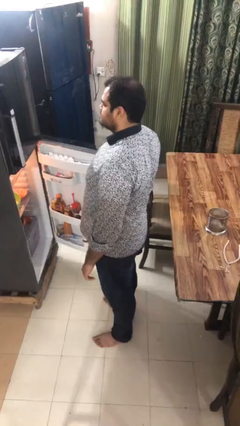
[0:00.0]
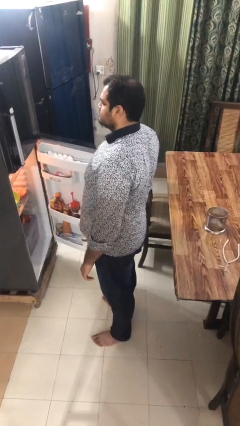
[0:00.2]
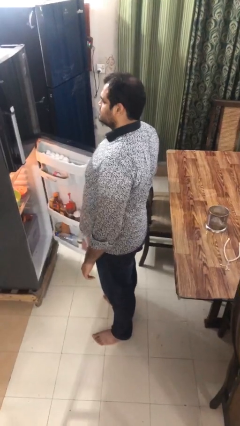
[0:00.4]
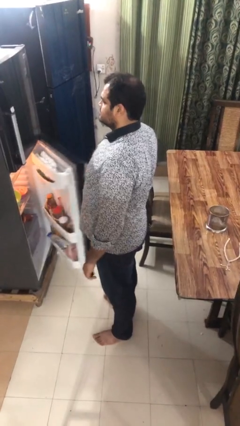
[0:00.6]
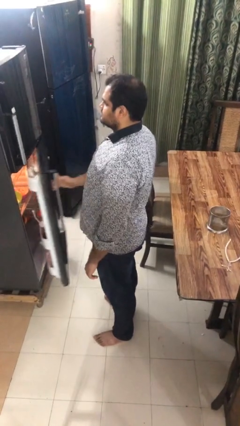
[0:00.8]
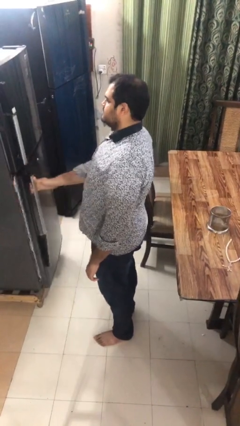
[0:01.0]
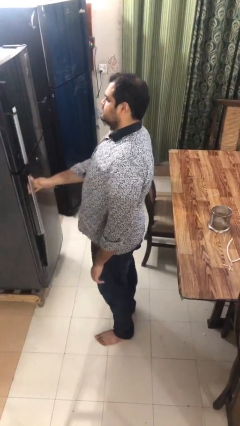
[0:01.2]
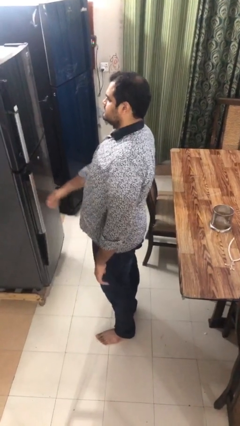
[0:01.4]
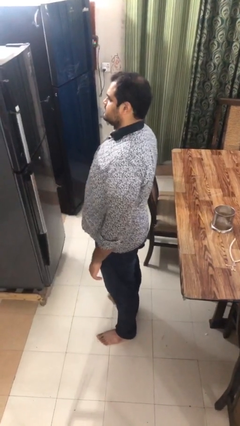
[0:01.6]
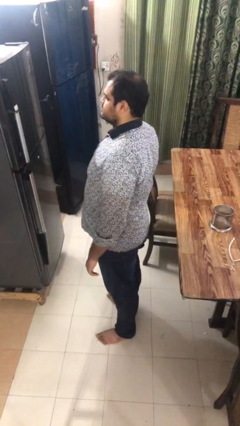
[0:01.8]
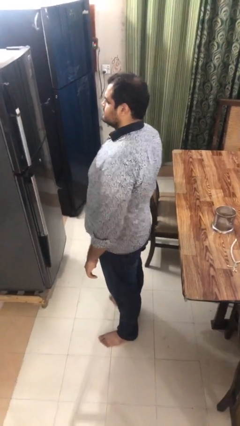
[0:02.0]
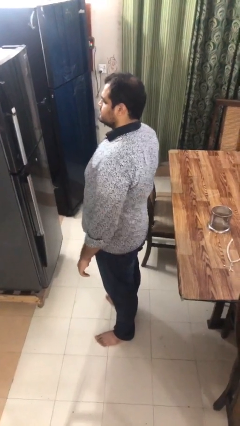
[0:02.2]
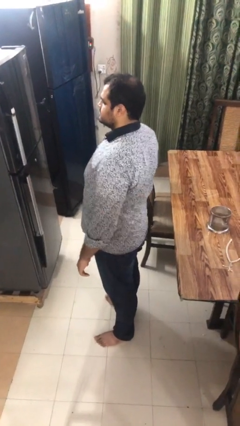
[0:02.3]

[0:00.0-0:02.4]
person closes refrigerator

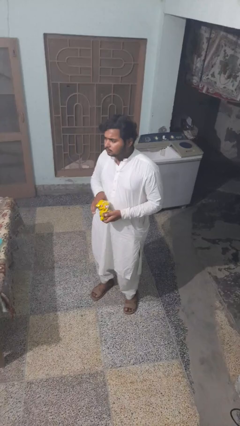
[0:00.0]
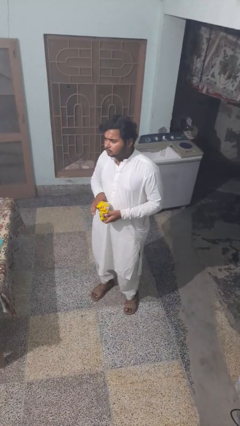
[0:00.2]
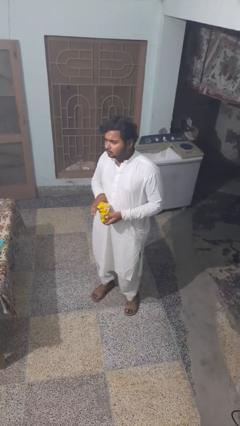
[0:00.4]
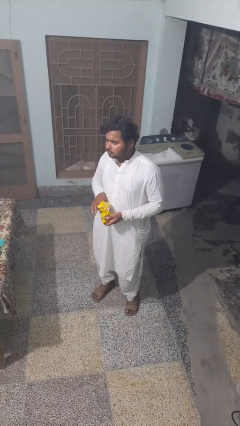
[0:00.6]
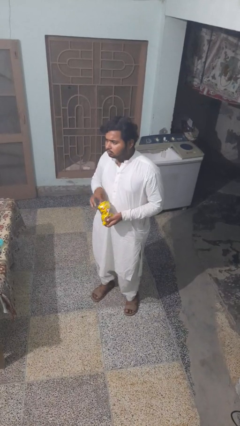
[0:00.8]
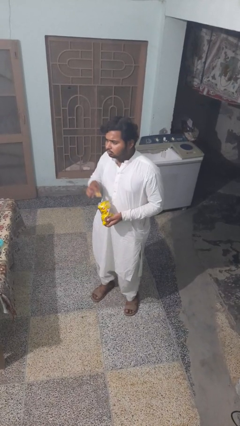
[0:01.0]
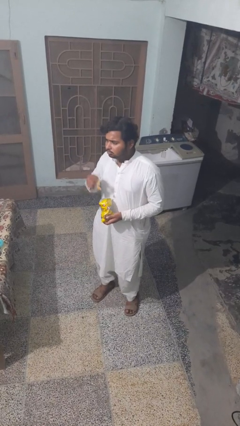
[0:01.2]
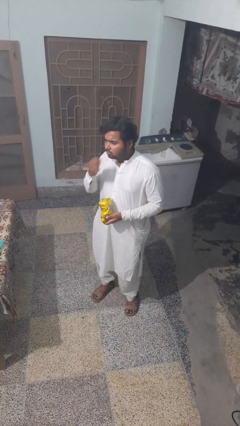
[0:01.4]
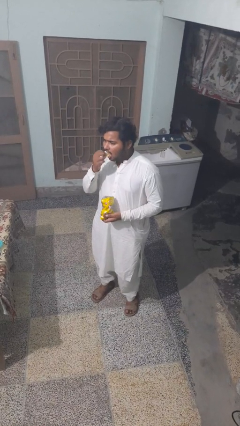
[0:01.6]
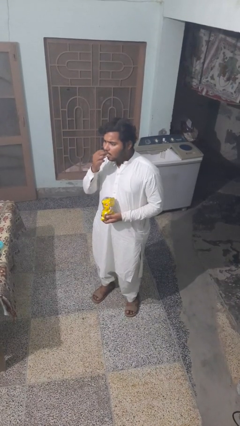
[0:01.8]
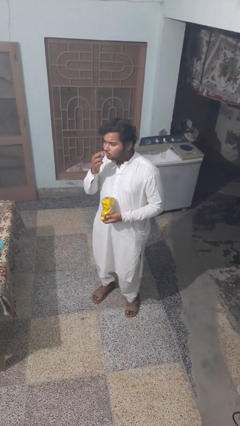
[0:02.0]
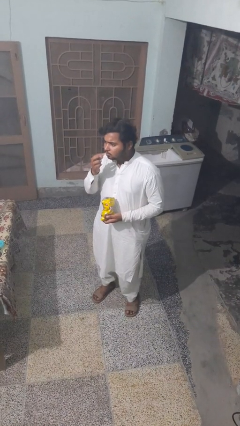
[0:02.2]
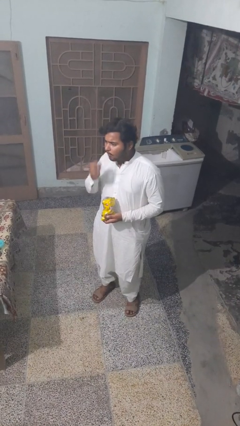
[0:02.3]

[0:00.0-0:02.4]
person eats snack from bag

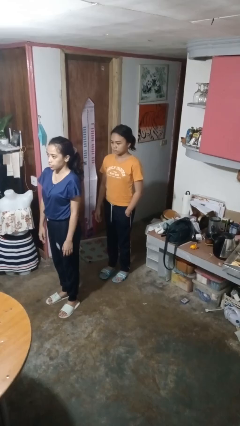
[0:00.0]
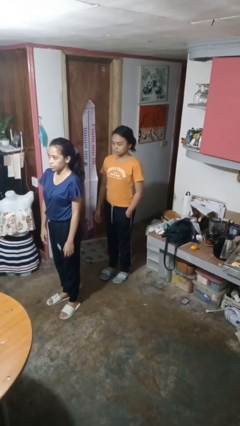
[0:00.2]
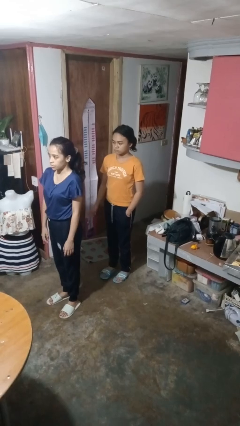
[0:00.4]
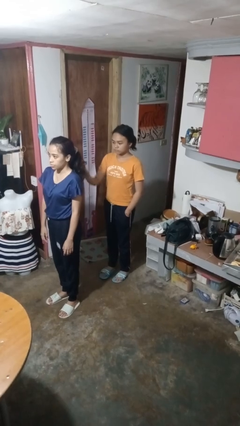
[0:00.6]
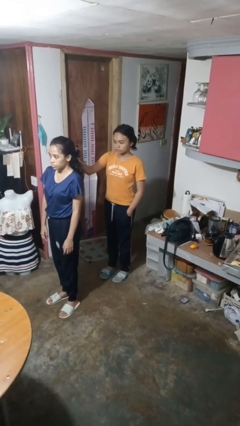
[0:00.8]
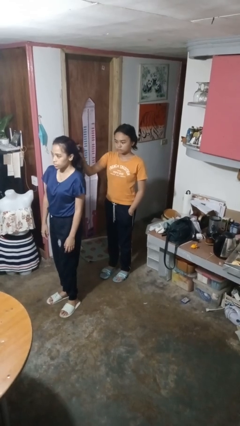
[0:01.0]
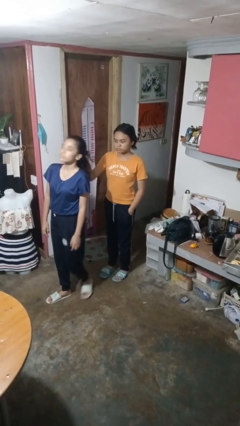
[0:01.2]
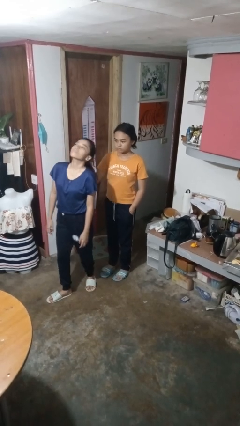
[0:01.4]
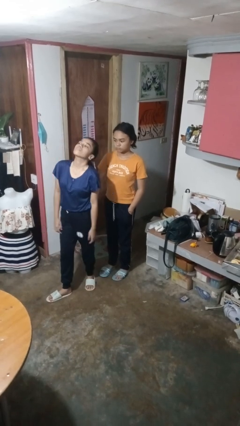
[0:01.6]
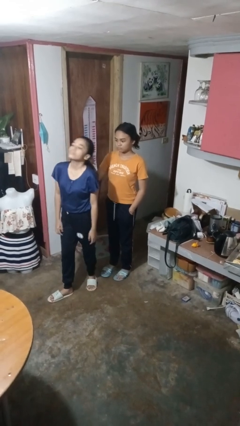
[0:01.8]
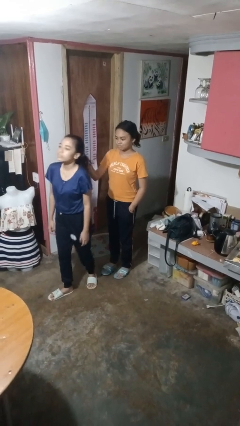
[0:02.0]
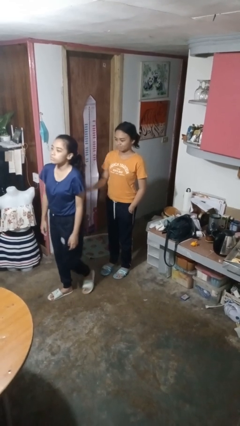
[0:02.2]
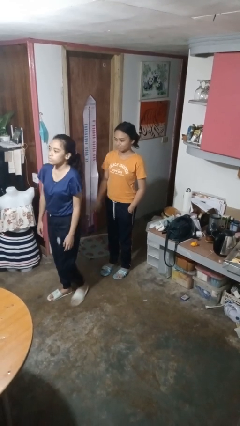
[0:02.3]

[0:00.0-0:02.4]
person grabs person by hair

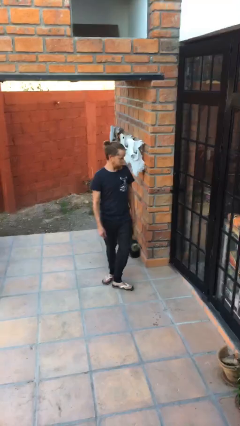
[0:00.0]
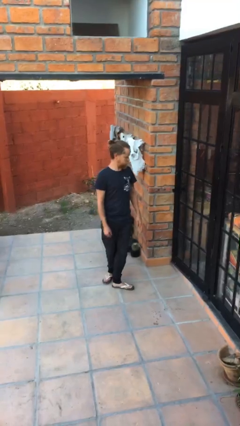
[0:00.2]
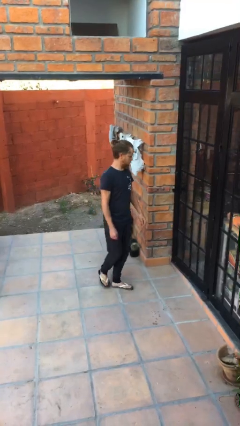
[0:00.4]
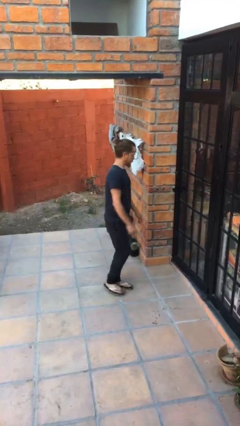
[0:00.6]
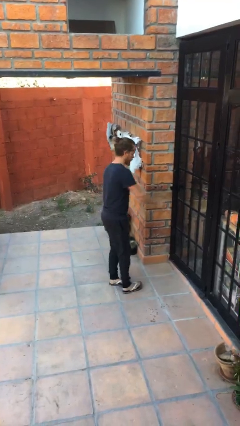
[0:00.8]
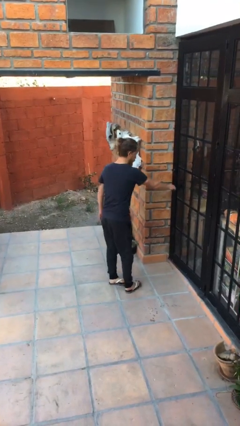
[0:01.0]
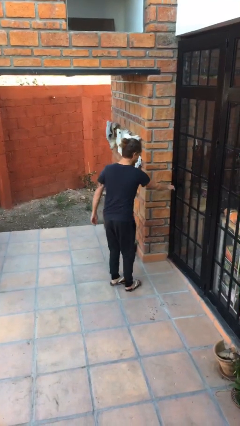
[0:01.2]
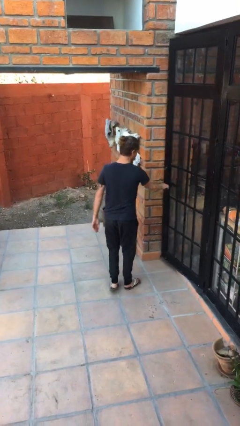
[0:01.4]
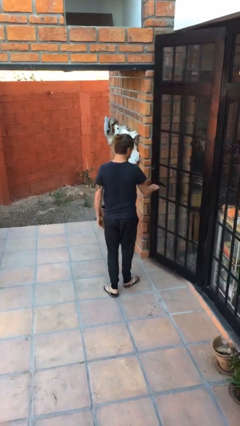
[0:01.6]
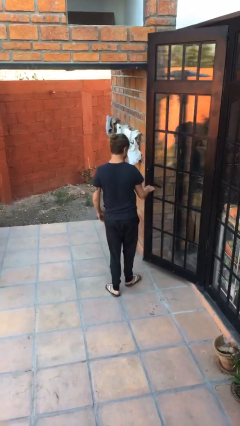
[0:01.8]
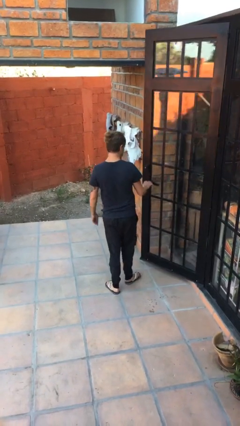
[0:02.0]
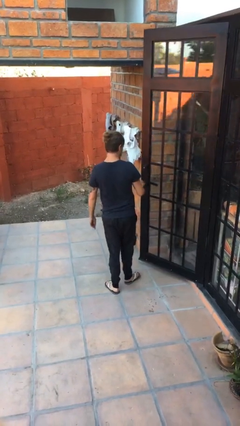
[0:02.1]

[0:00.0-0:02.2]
person opens facility door

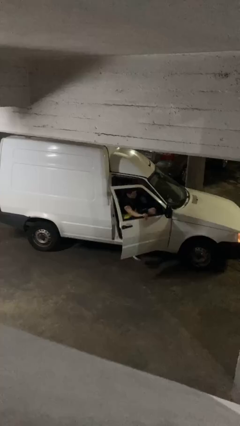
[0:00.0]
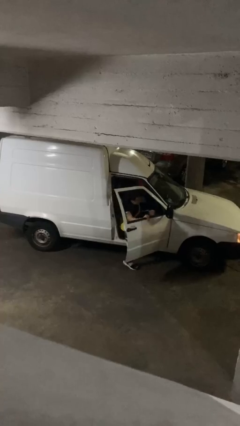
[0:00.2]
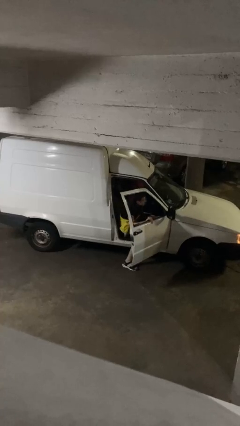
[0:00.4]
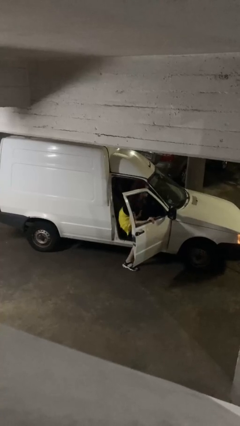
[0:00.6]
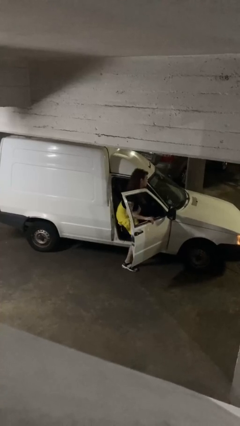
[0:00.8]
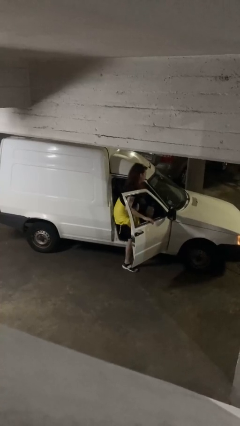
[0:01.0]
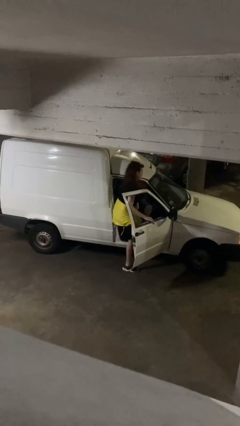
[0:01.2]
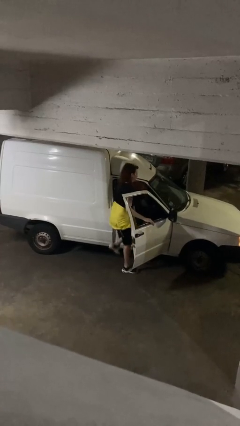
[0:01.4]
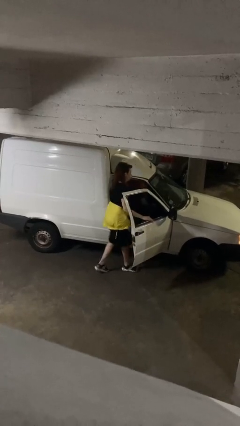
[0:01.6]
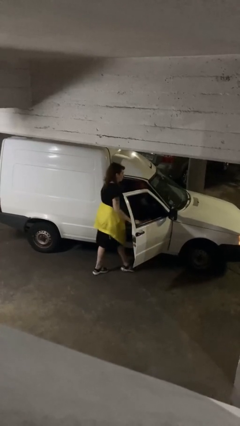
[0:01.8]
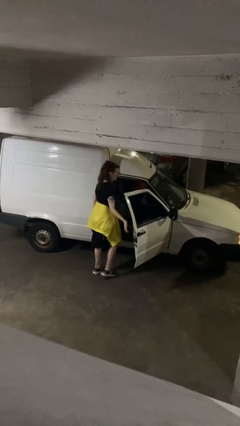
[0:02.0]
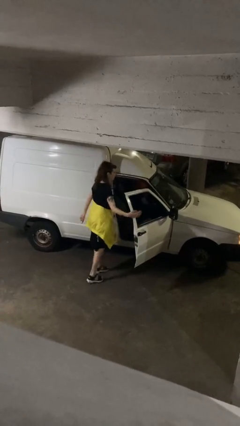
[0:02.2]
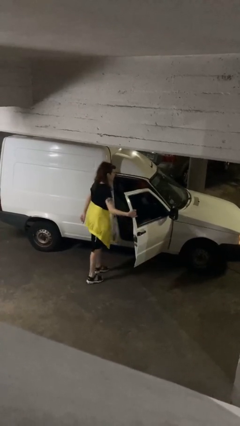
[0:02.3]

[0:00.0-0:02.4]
car drops off person

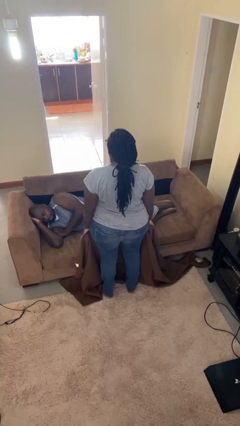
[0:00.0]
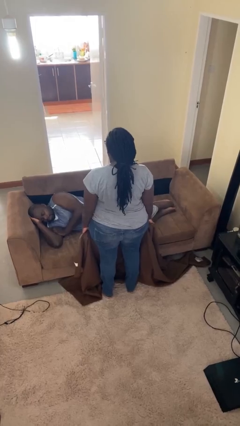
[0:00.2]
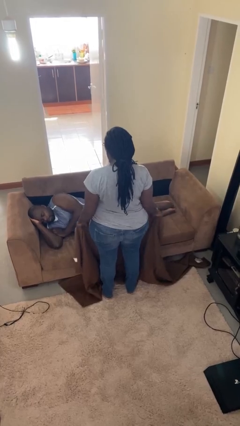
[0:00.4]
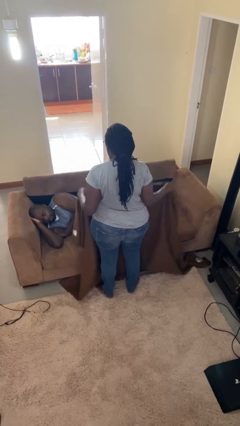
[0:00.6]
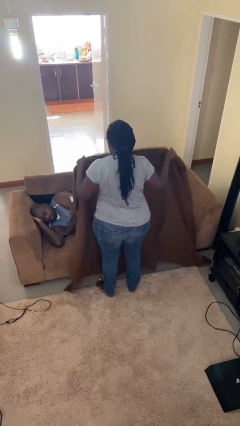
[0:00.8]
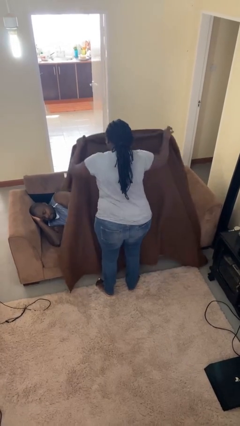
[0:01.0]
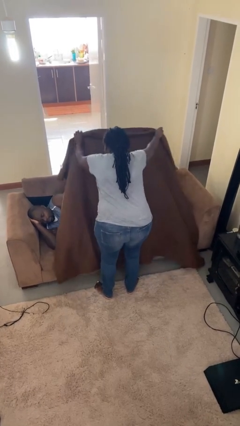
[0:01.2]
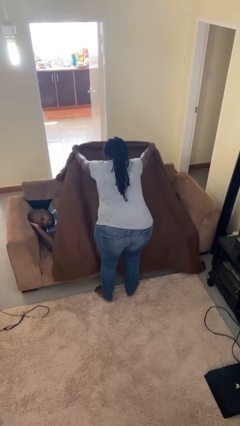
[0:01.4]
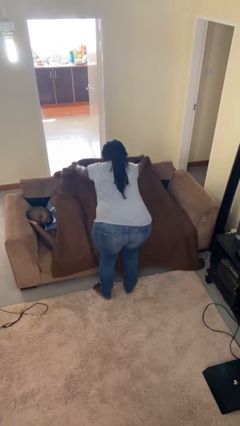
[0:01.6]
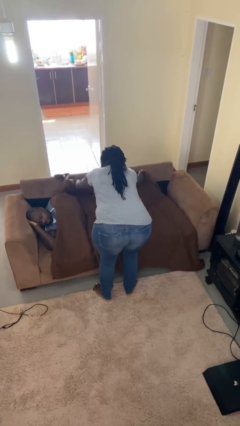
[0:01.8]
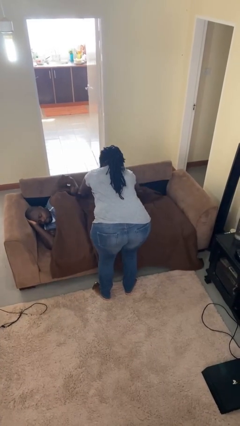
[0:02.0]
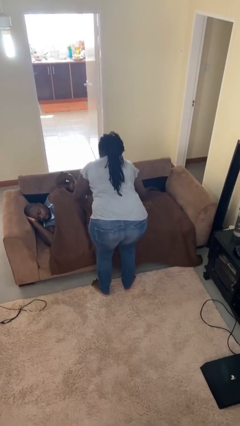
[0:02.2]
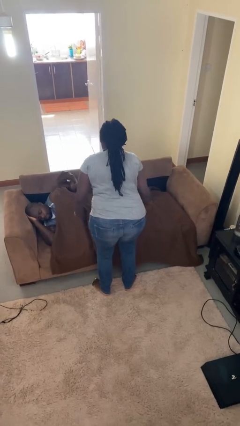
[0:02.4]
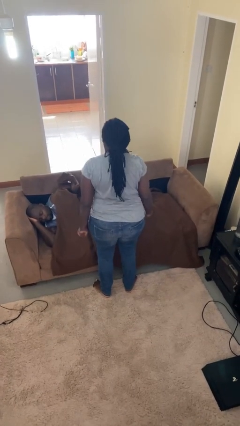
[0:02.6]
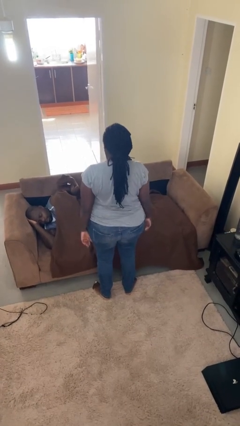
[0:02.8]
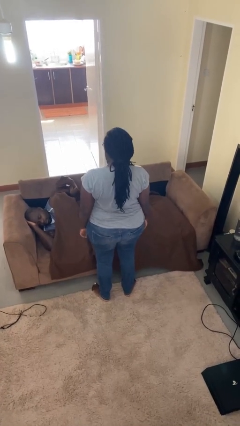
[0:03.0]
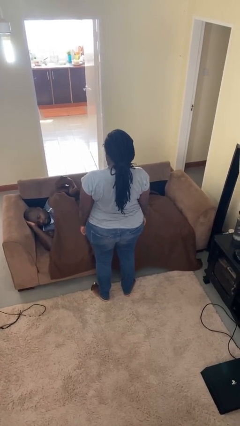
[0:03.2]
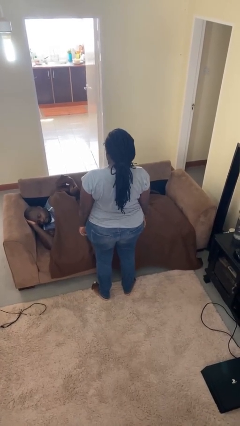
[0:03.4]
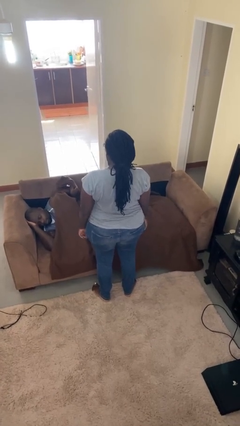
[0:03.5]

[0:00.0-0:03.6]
person covers friend with blanket

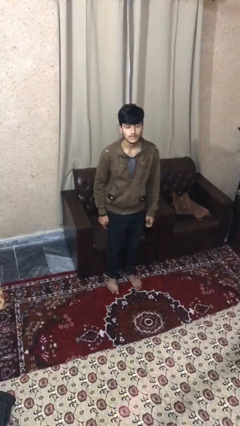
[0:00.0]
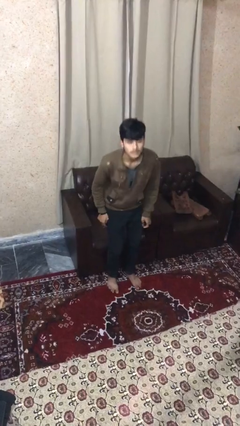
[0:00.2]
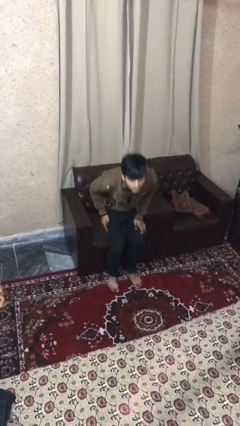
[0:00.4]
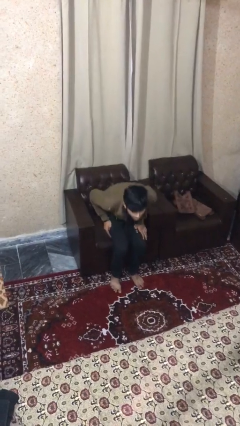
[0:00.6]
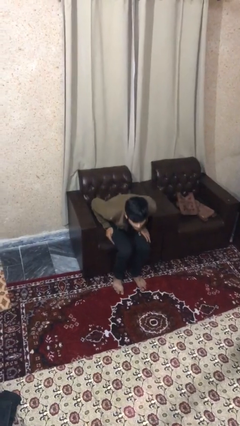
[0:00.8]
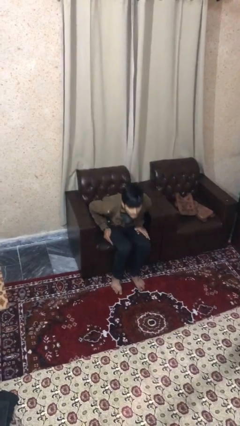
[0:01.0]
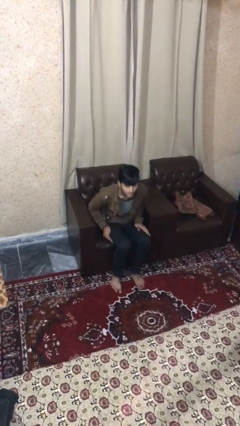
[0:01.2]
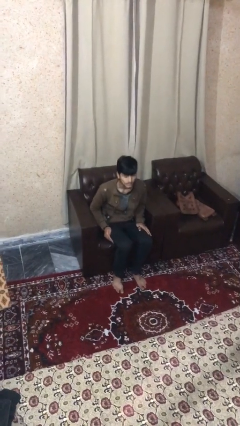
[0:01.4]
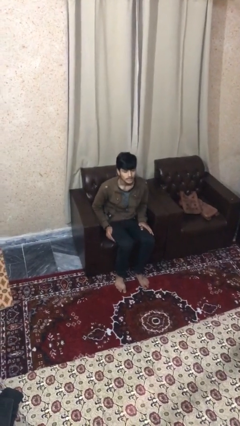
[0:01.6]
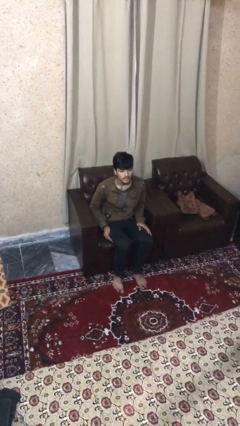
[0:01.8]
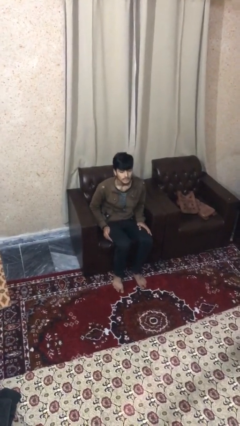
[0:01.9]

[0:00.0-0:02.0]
person sits down
